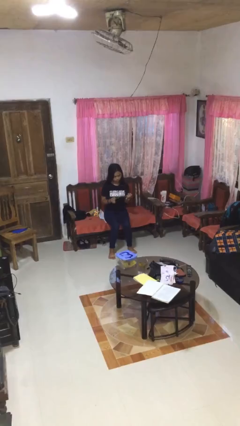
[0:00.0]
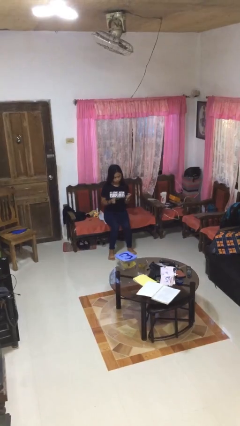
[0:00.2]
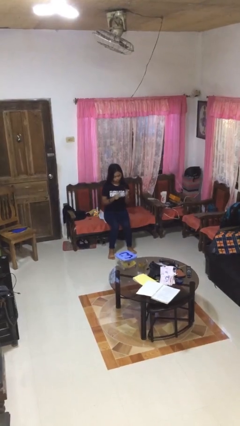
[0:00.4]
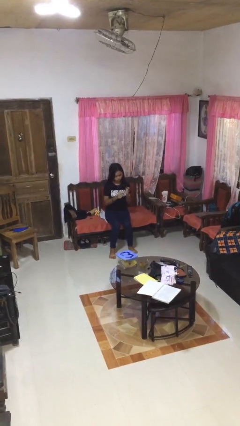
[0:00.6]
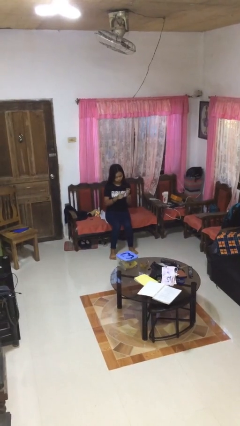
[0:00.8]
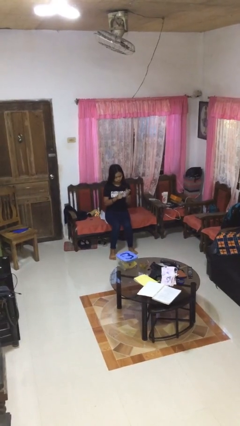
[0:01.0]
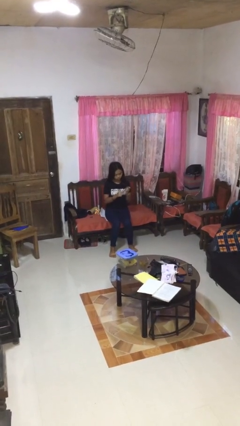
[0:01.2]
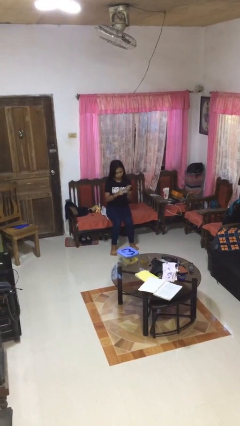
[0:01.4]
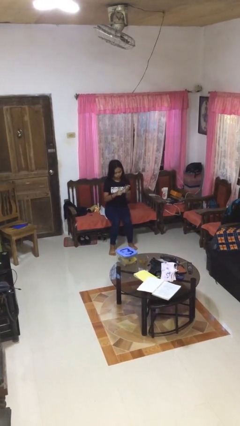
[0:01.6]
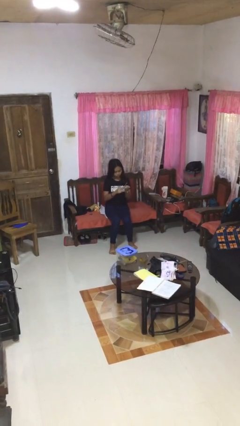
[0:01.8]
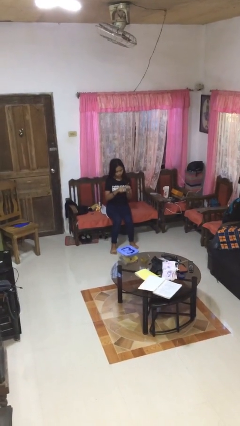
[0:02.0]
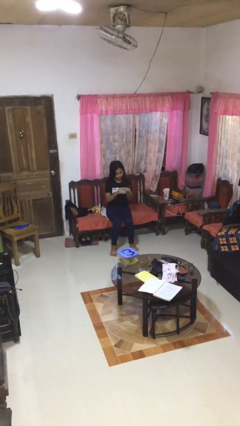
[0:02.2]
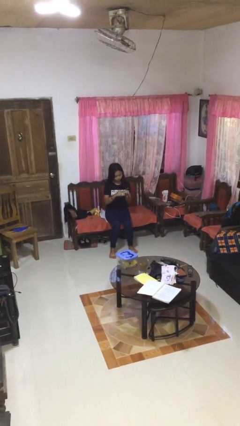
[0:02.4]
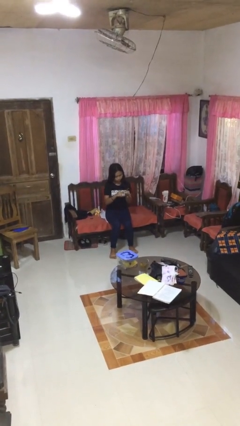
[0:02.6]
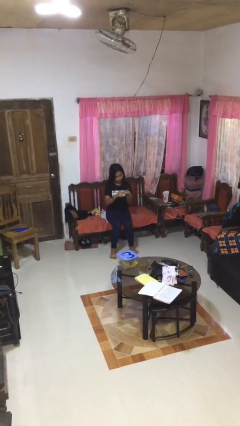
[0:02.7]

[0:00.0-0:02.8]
person files fingernails

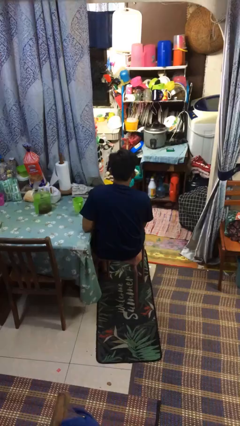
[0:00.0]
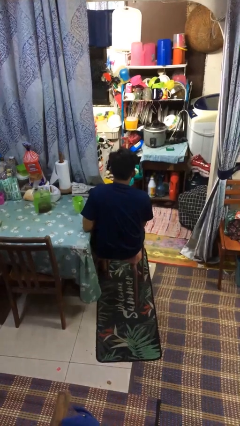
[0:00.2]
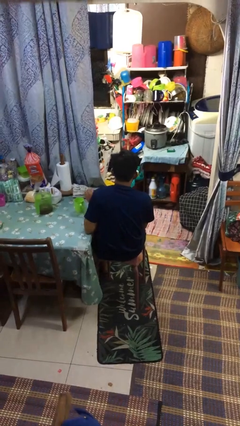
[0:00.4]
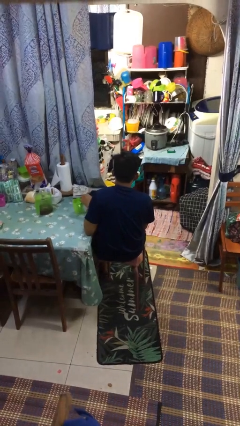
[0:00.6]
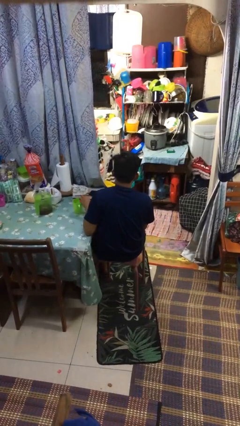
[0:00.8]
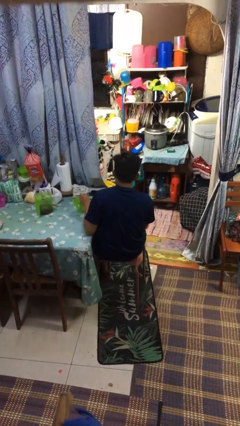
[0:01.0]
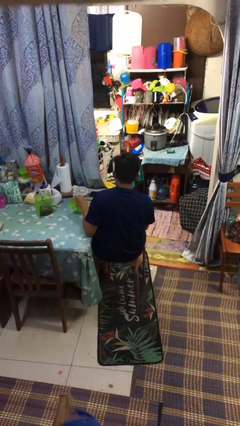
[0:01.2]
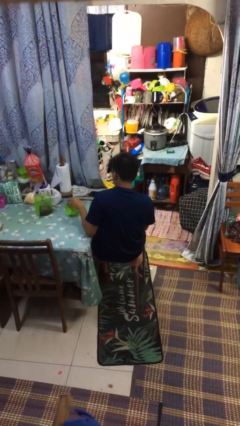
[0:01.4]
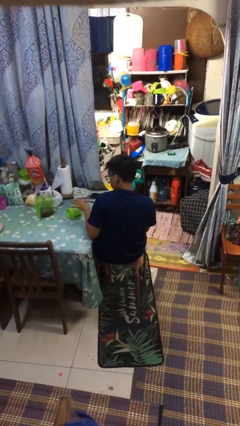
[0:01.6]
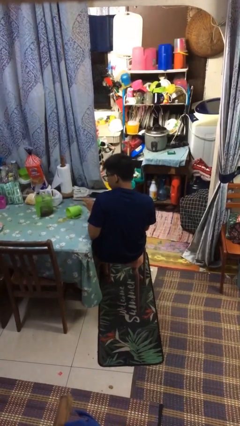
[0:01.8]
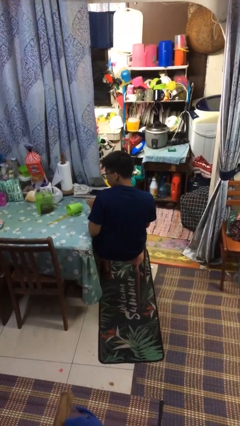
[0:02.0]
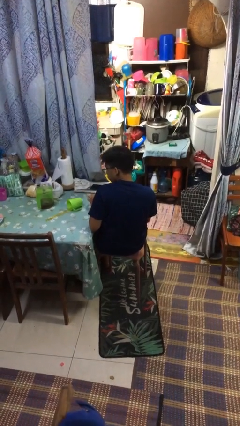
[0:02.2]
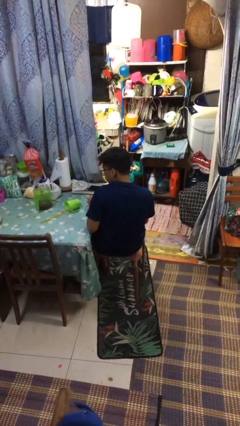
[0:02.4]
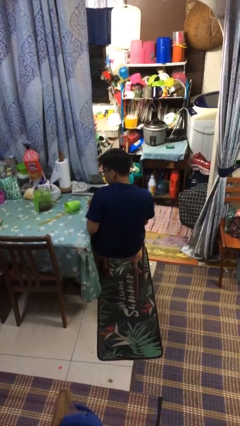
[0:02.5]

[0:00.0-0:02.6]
person spills on table

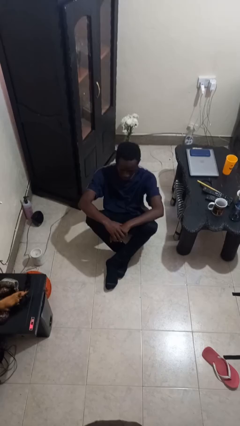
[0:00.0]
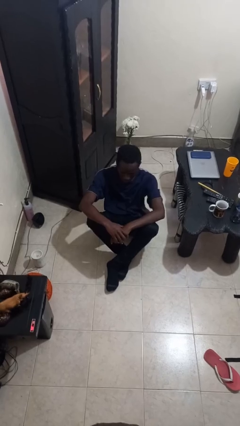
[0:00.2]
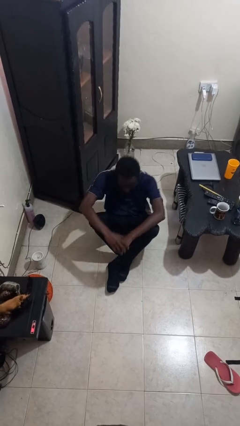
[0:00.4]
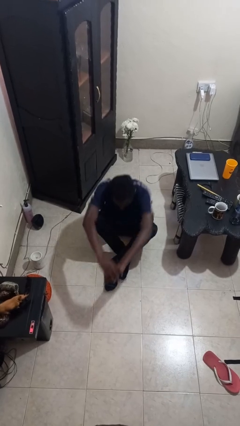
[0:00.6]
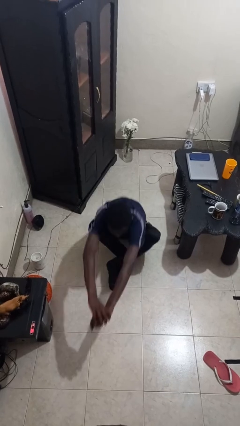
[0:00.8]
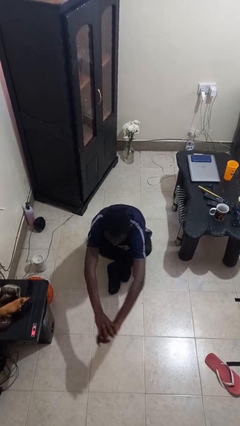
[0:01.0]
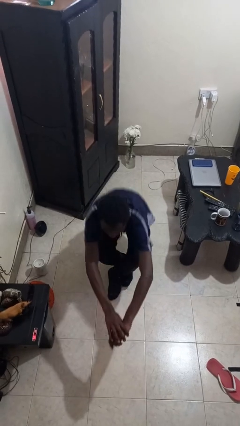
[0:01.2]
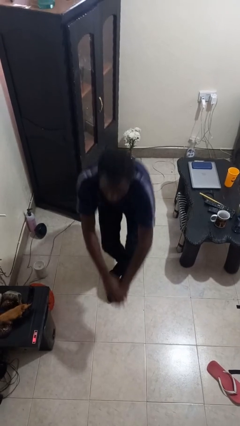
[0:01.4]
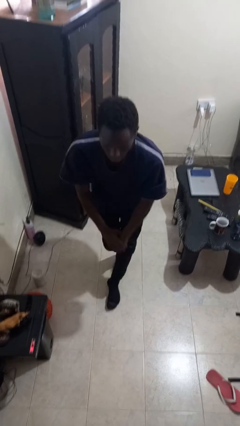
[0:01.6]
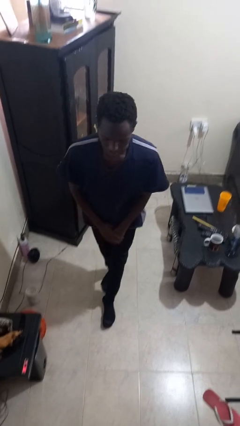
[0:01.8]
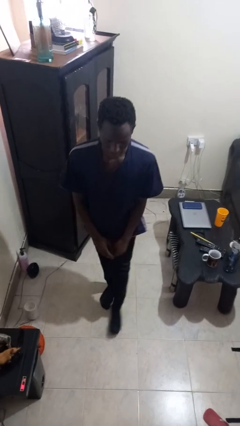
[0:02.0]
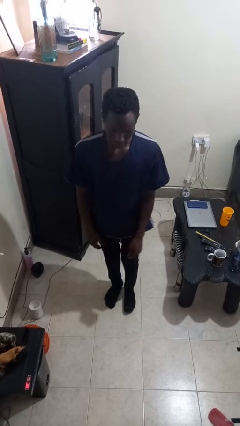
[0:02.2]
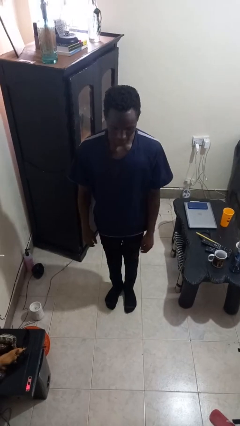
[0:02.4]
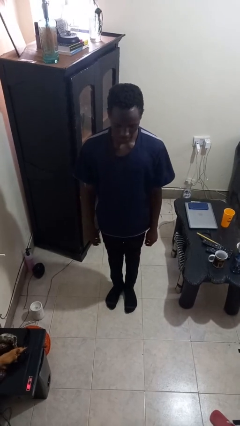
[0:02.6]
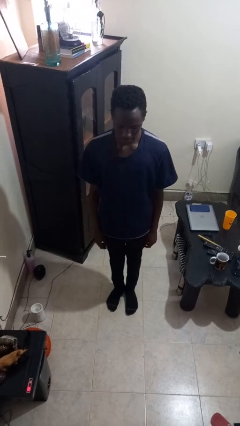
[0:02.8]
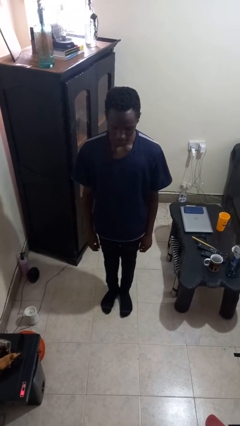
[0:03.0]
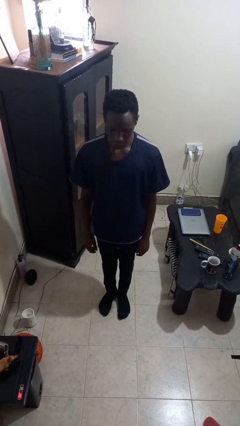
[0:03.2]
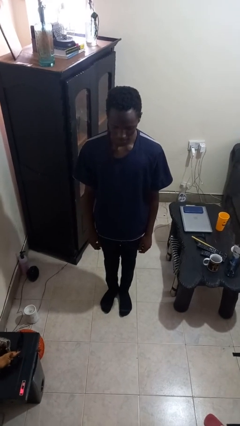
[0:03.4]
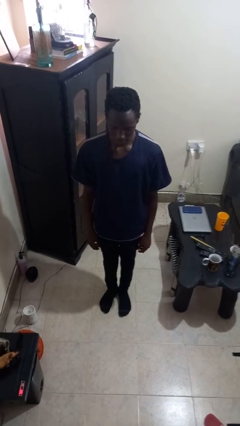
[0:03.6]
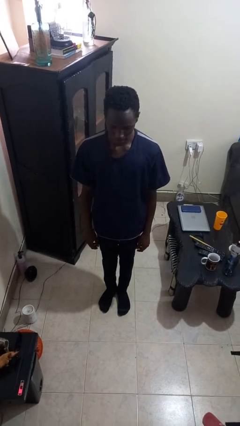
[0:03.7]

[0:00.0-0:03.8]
person stands up from floor

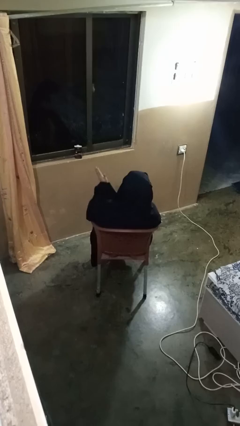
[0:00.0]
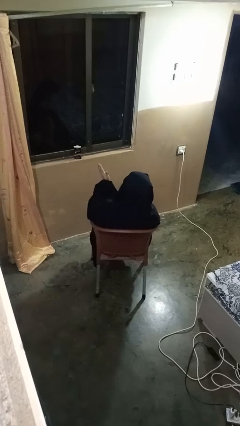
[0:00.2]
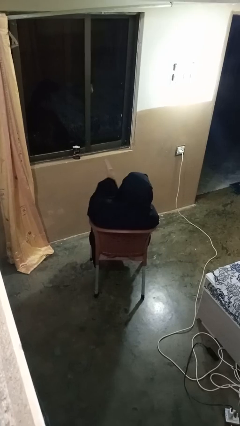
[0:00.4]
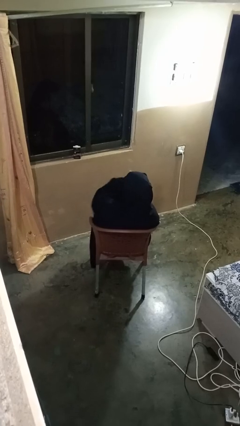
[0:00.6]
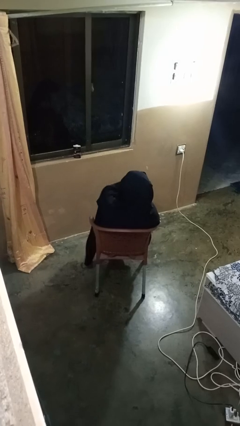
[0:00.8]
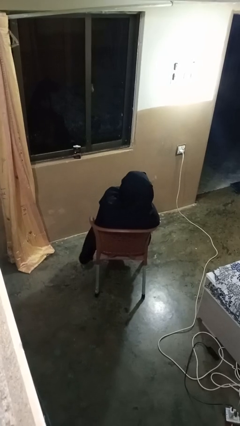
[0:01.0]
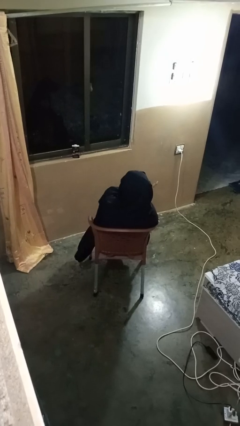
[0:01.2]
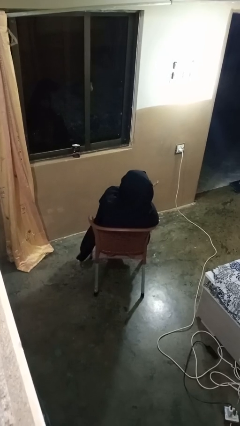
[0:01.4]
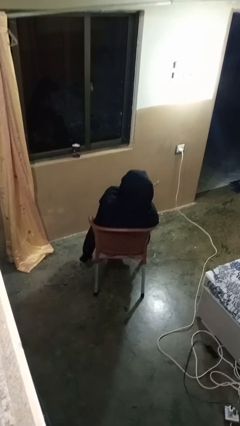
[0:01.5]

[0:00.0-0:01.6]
person gestures swipe right

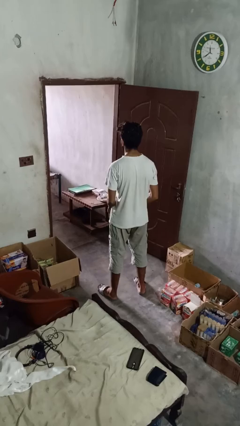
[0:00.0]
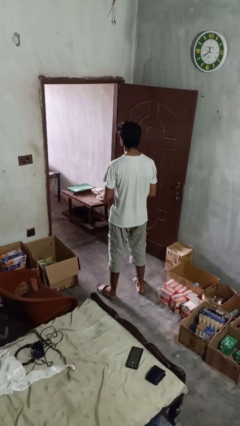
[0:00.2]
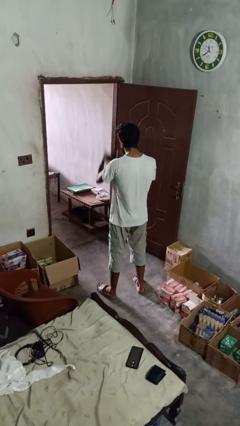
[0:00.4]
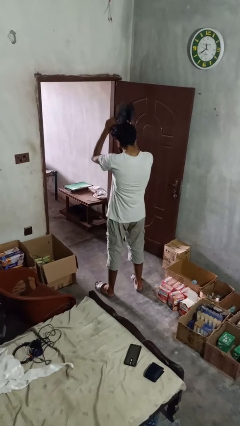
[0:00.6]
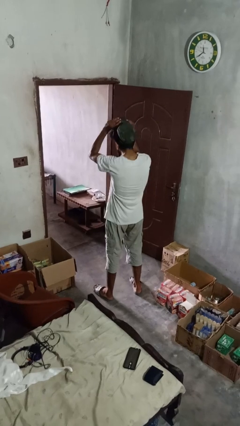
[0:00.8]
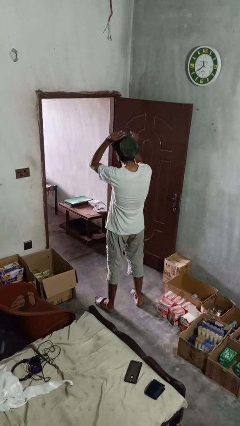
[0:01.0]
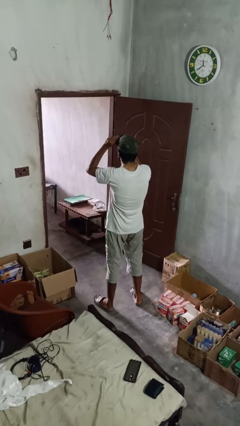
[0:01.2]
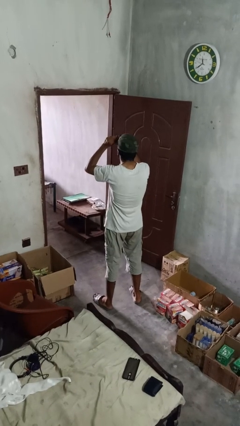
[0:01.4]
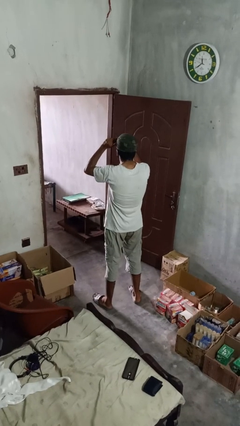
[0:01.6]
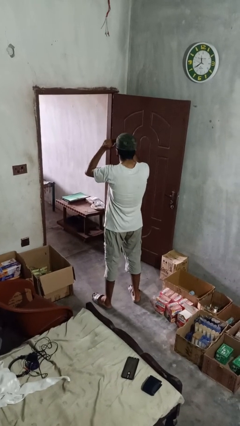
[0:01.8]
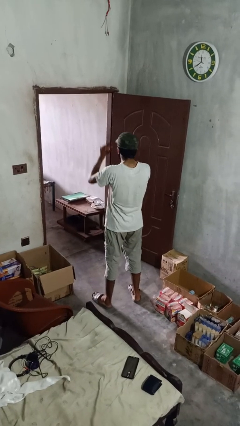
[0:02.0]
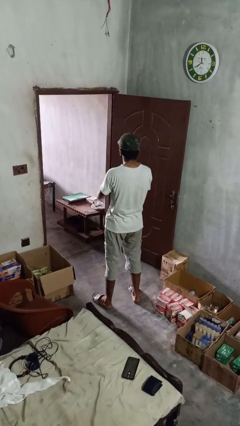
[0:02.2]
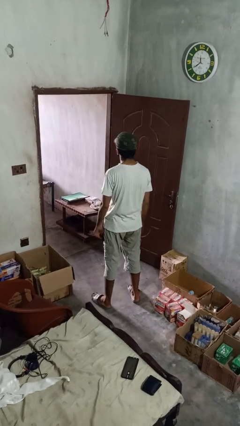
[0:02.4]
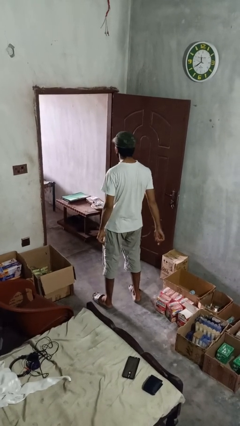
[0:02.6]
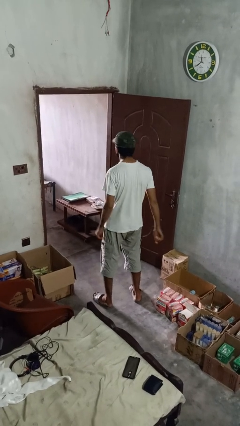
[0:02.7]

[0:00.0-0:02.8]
person puts on hat

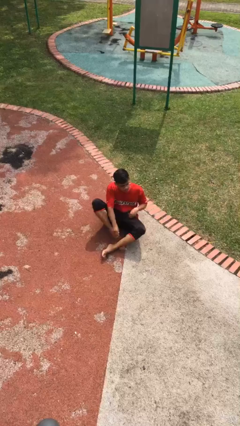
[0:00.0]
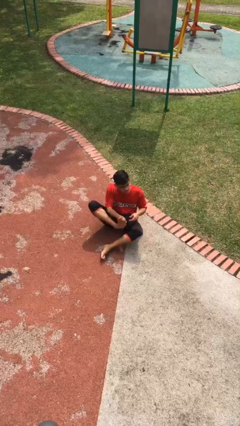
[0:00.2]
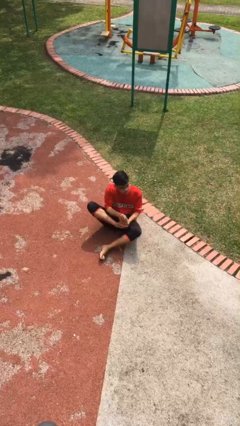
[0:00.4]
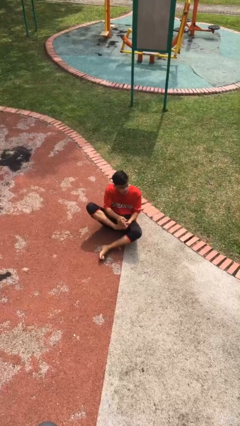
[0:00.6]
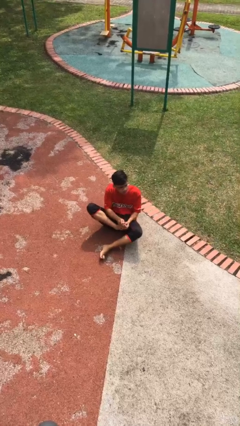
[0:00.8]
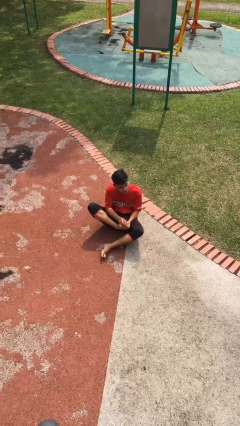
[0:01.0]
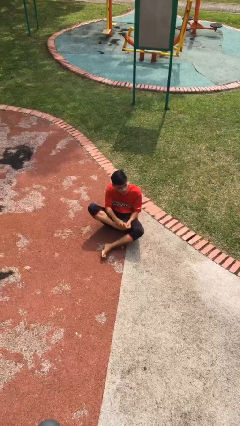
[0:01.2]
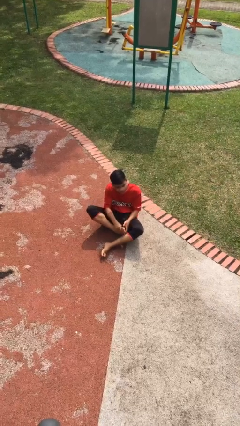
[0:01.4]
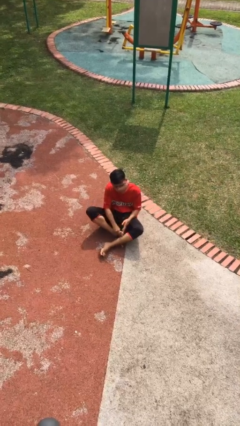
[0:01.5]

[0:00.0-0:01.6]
person rubs foot

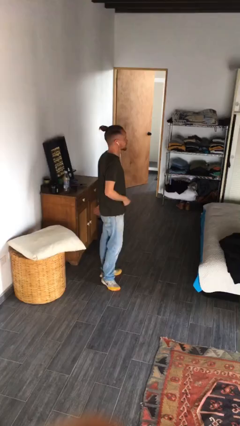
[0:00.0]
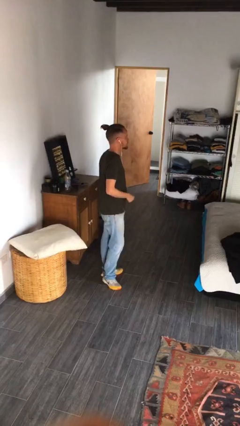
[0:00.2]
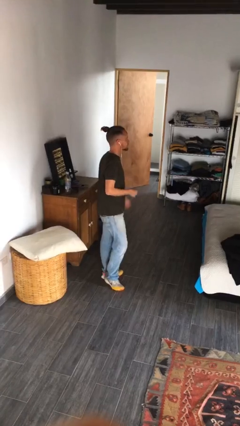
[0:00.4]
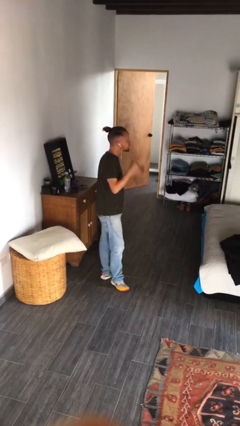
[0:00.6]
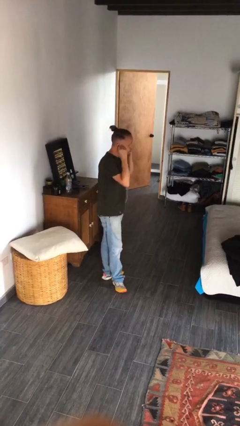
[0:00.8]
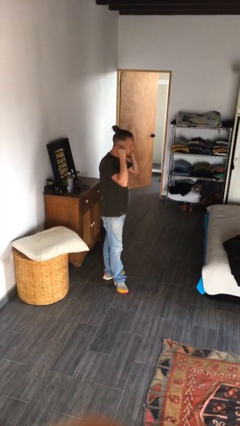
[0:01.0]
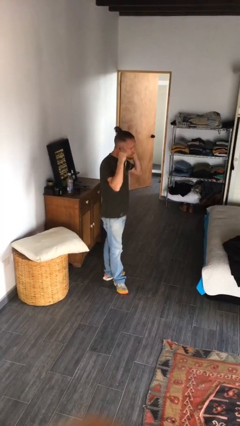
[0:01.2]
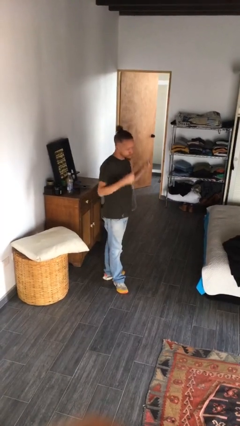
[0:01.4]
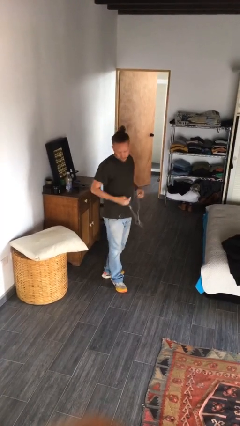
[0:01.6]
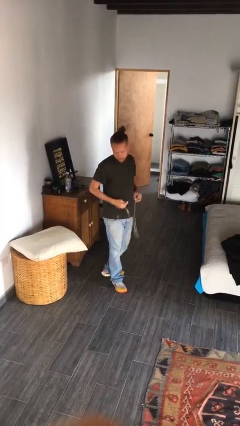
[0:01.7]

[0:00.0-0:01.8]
person takes off headphones
